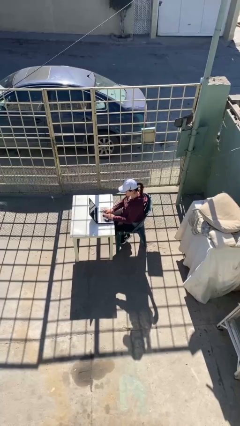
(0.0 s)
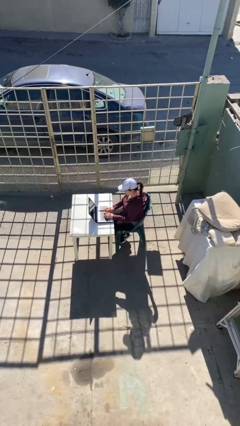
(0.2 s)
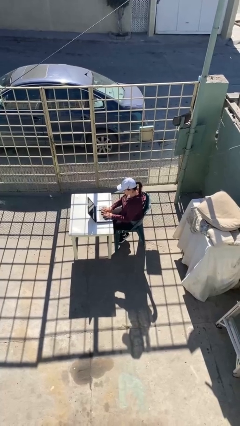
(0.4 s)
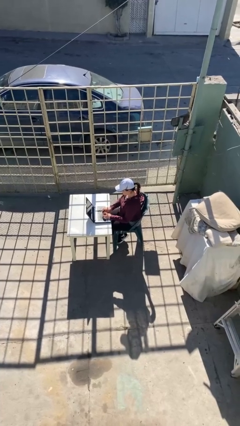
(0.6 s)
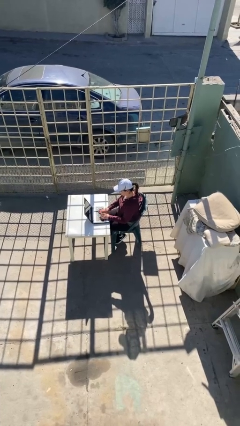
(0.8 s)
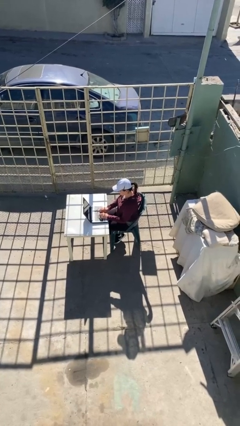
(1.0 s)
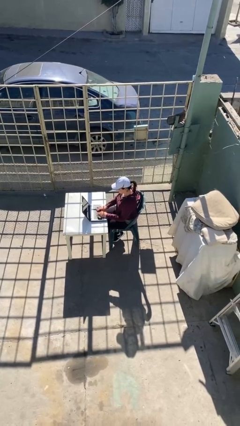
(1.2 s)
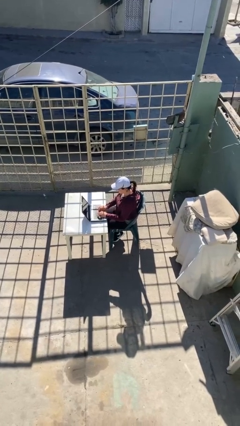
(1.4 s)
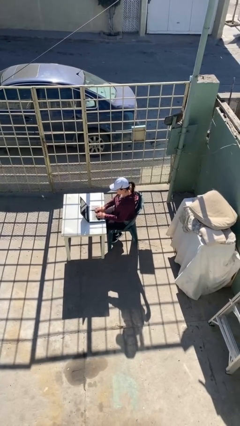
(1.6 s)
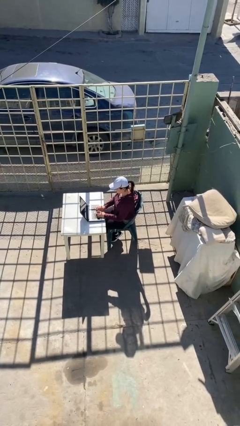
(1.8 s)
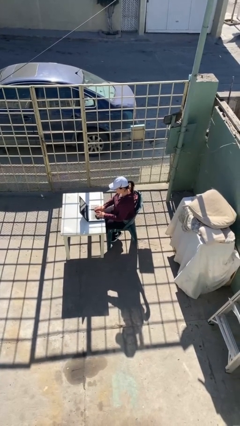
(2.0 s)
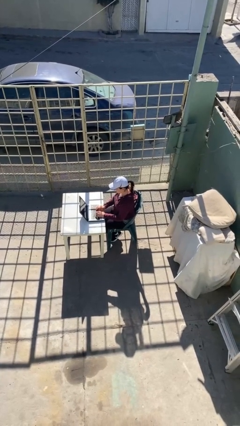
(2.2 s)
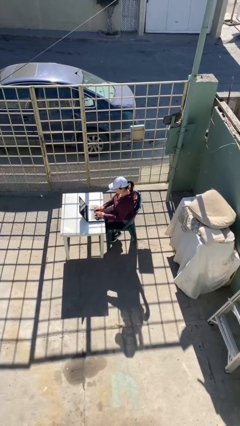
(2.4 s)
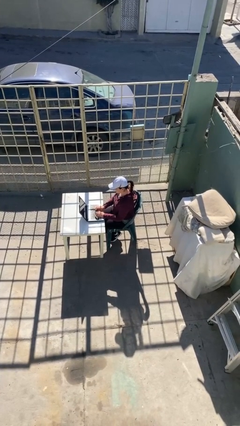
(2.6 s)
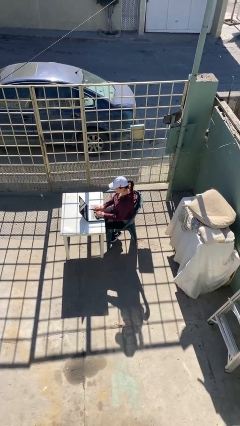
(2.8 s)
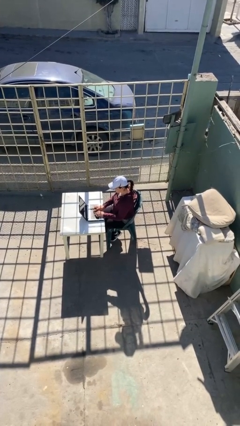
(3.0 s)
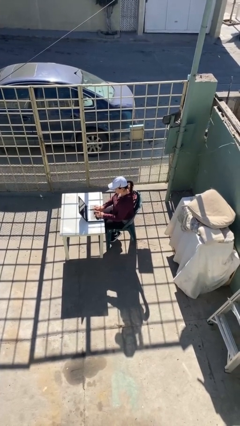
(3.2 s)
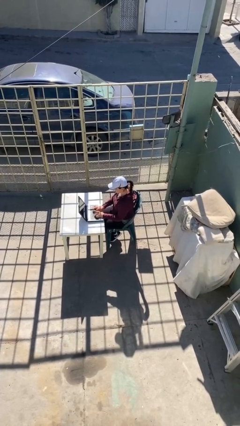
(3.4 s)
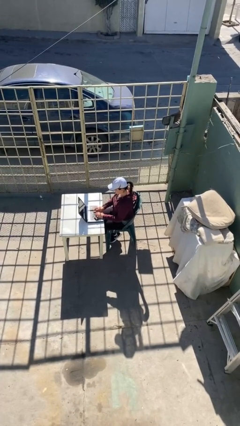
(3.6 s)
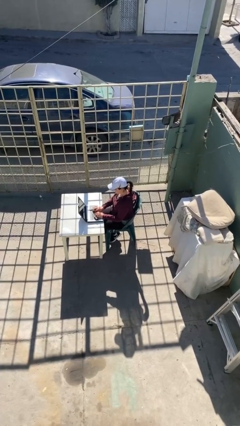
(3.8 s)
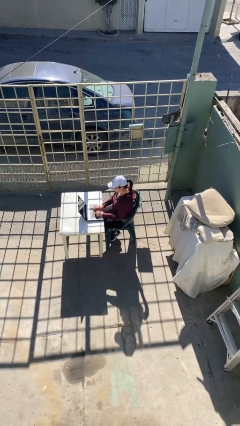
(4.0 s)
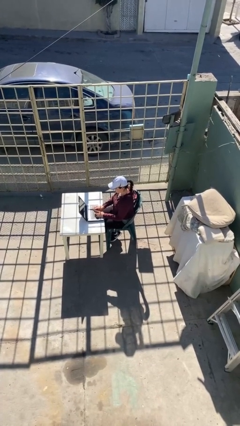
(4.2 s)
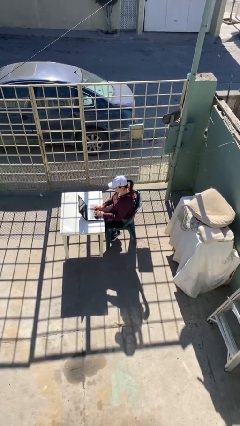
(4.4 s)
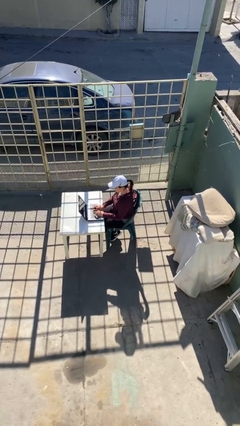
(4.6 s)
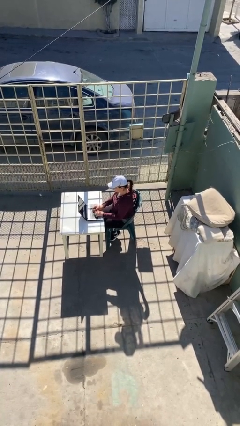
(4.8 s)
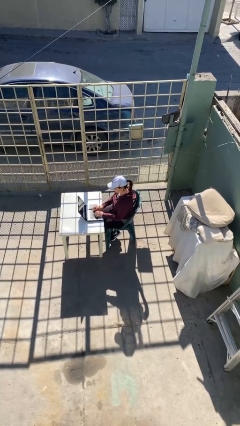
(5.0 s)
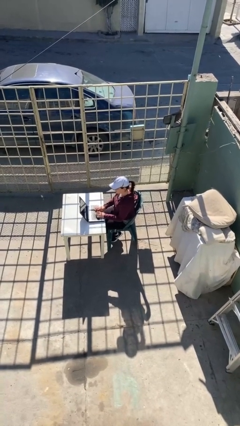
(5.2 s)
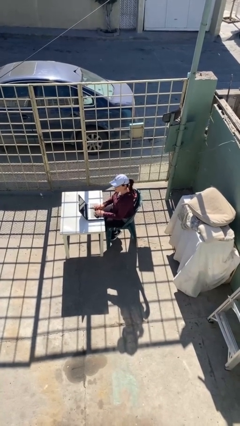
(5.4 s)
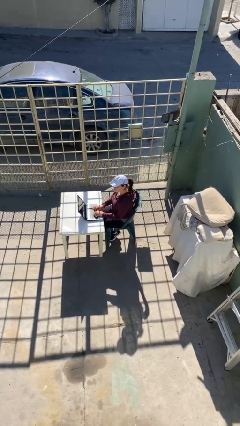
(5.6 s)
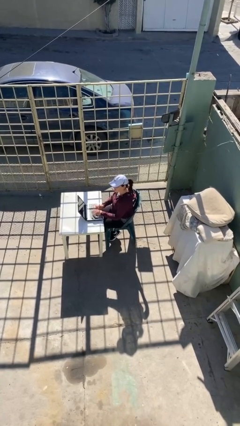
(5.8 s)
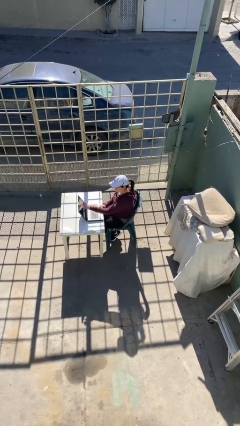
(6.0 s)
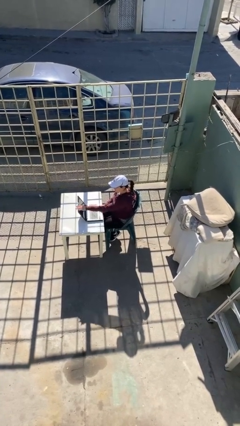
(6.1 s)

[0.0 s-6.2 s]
person interacts with laptop

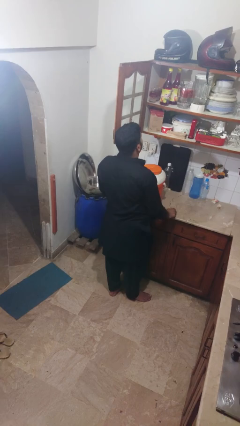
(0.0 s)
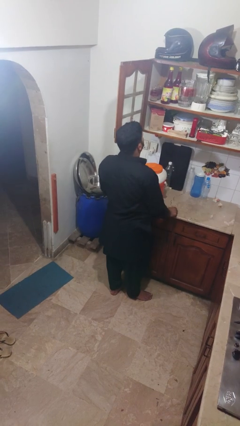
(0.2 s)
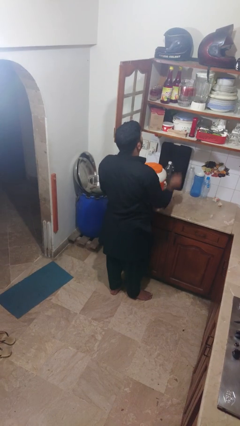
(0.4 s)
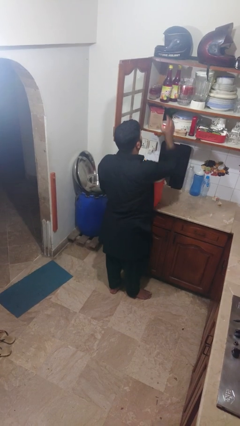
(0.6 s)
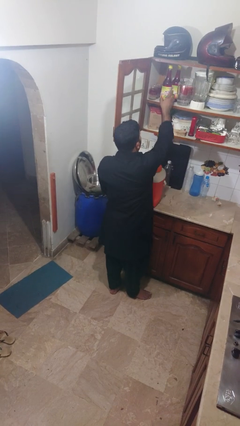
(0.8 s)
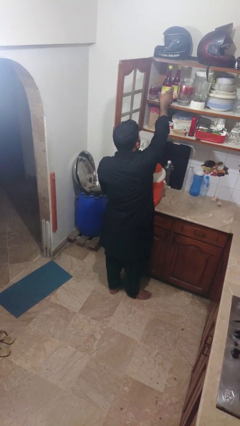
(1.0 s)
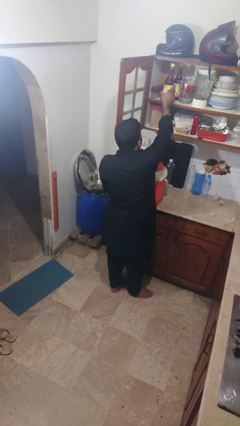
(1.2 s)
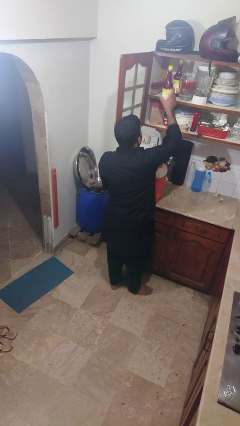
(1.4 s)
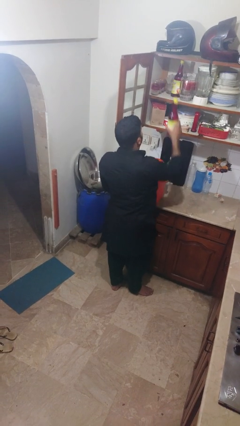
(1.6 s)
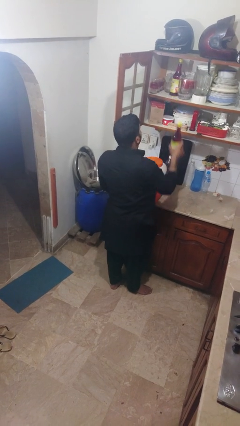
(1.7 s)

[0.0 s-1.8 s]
person picks up object from cabinet

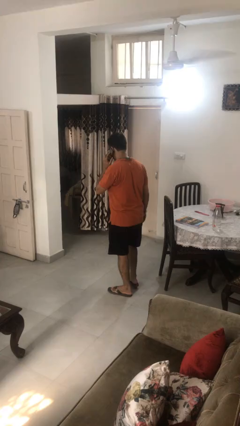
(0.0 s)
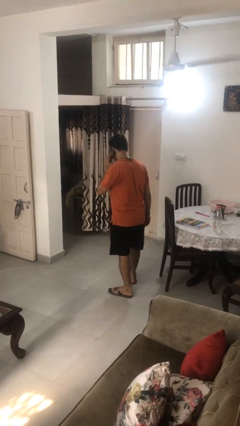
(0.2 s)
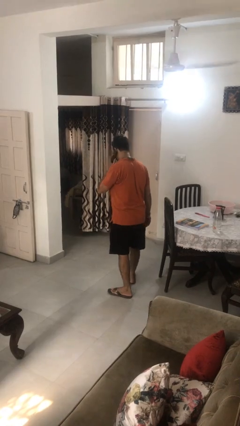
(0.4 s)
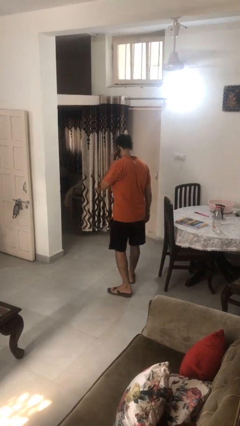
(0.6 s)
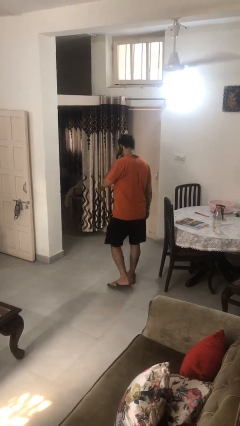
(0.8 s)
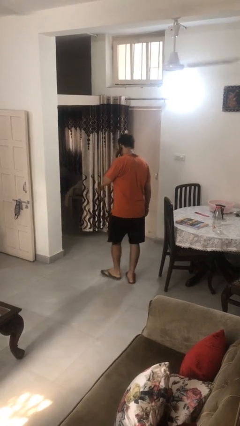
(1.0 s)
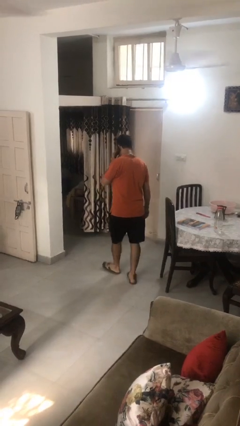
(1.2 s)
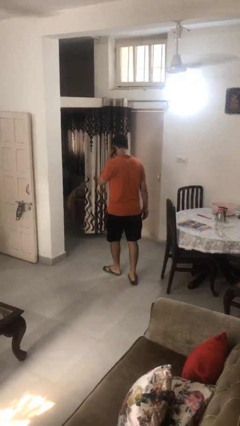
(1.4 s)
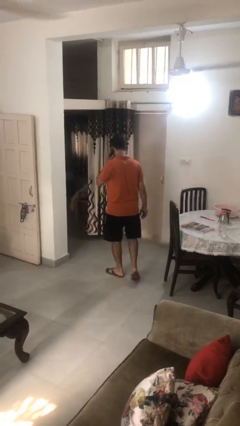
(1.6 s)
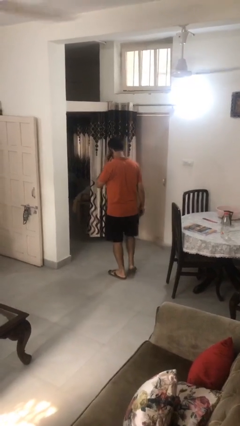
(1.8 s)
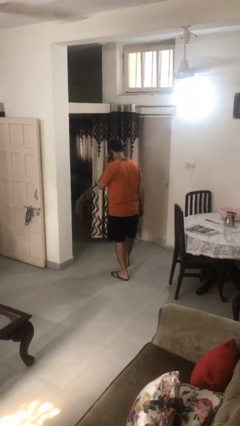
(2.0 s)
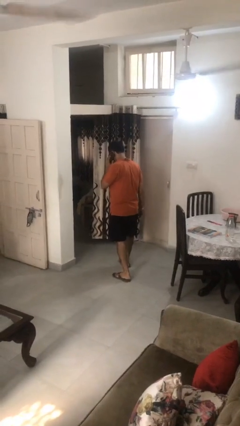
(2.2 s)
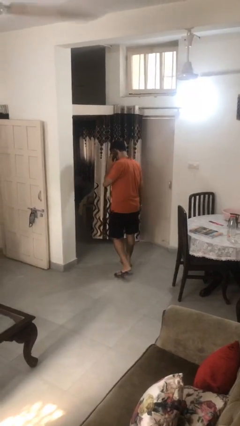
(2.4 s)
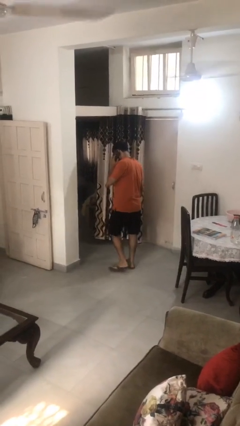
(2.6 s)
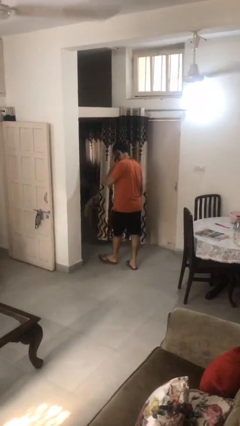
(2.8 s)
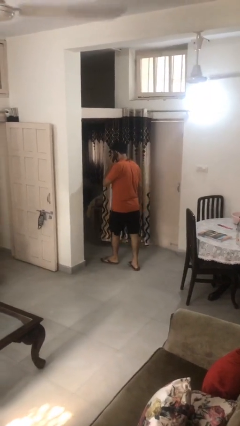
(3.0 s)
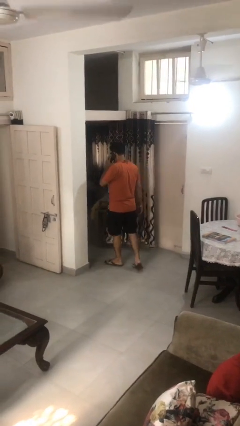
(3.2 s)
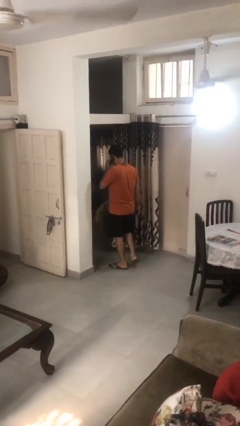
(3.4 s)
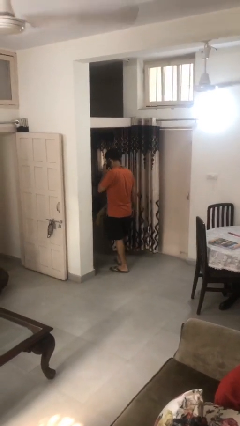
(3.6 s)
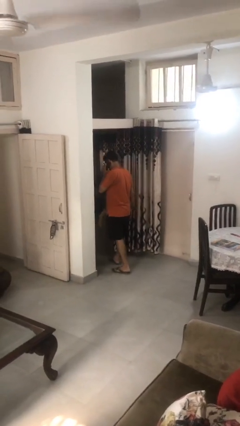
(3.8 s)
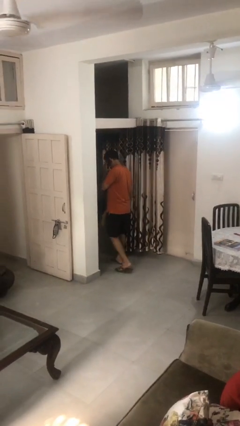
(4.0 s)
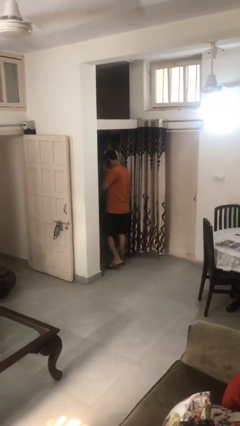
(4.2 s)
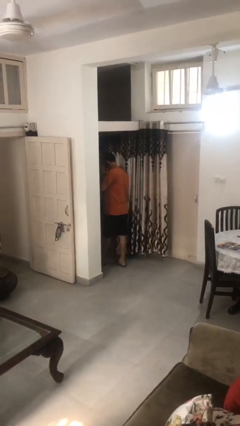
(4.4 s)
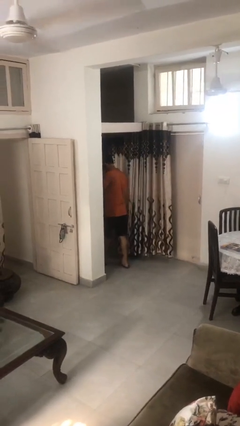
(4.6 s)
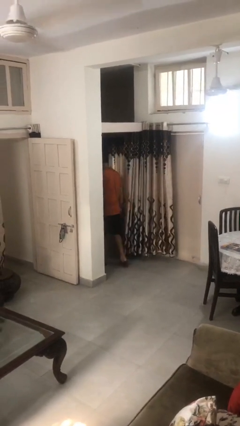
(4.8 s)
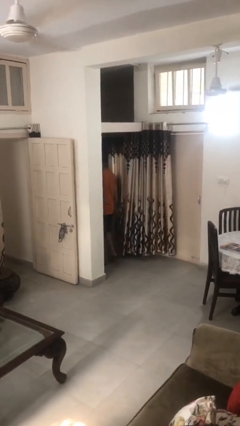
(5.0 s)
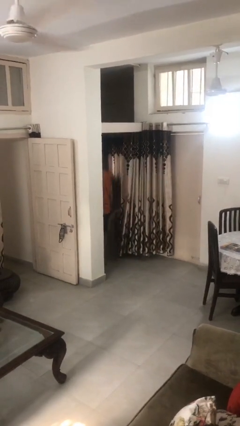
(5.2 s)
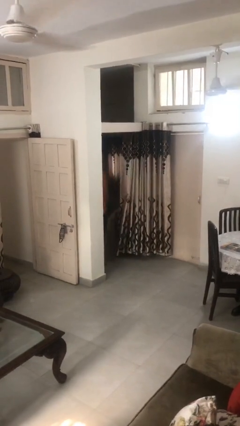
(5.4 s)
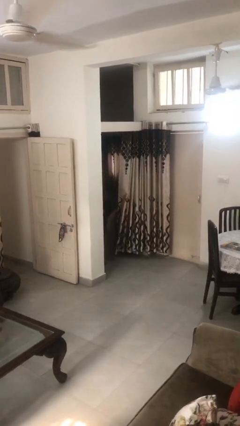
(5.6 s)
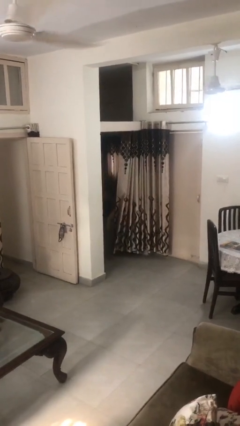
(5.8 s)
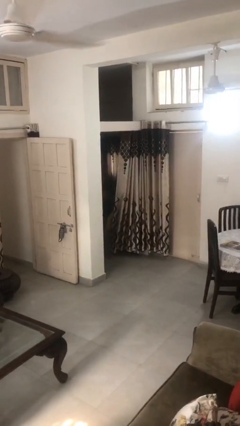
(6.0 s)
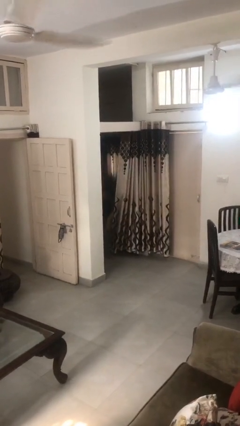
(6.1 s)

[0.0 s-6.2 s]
person exits scene through structure

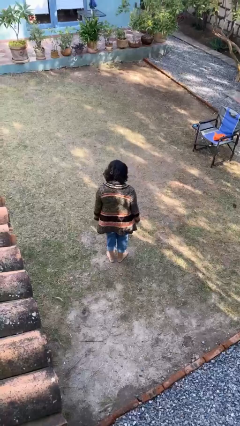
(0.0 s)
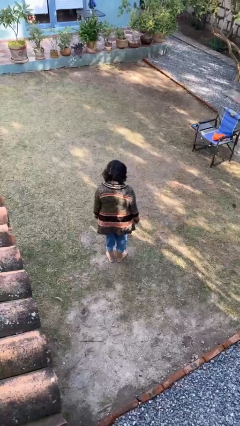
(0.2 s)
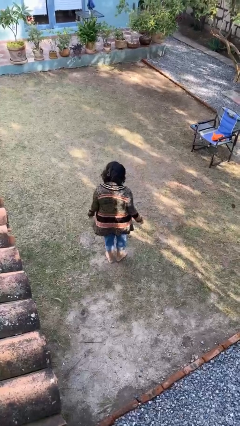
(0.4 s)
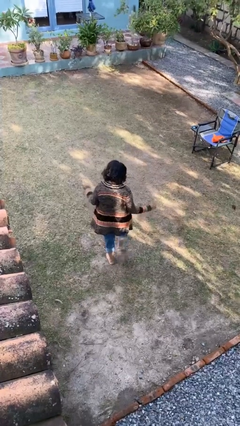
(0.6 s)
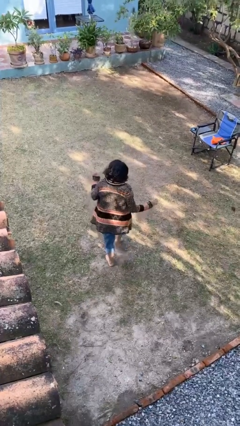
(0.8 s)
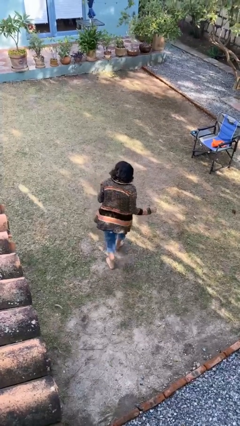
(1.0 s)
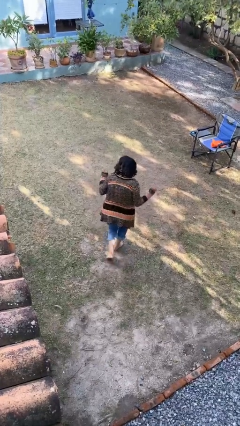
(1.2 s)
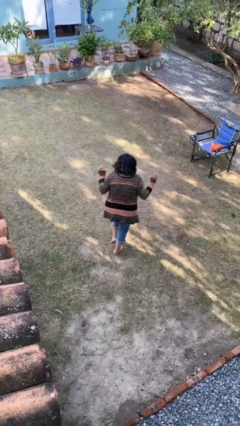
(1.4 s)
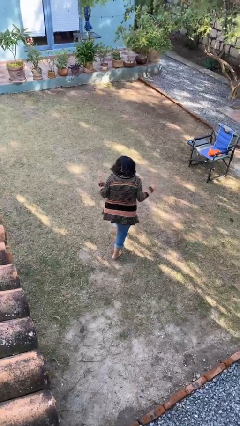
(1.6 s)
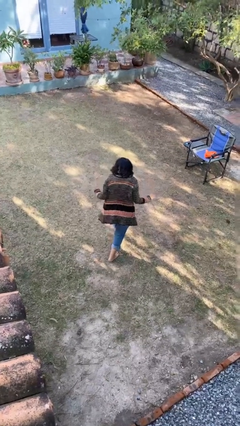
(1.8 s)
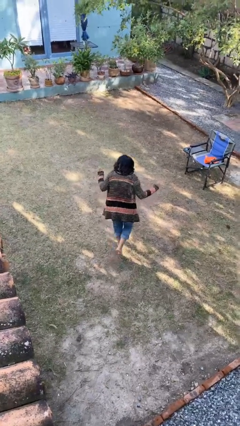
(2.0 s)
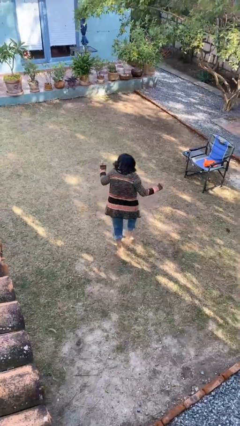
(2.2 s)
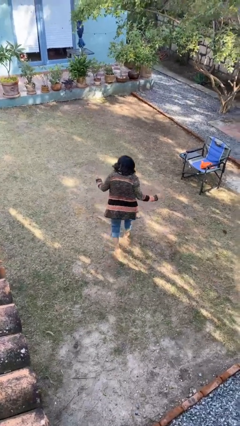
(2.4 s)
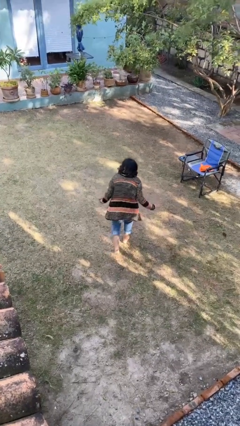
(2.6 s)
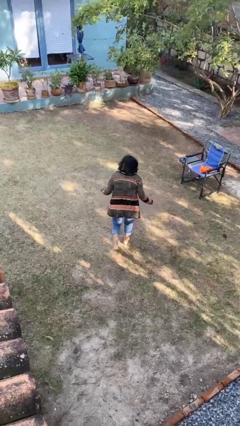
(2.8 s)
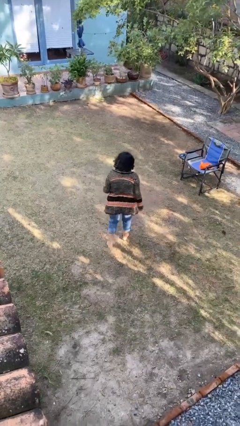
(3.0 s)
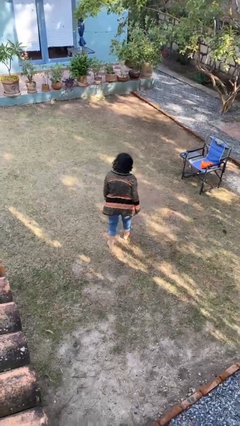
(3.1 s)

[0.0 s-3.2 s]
person walks tiptoe

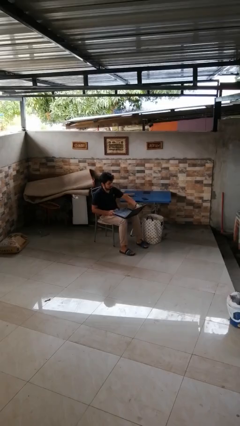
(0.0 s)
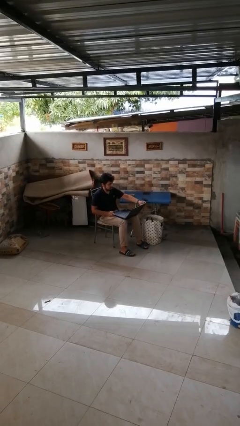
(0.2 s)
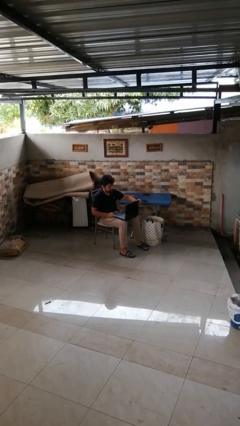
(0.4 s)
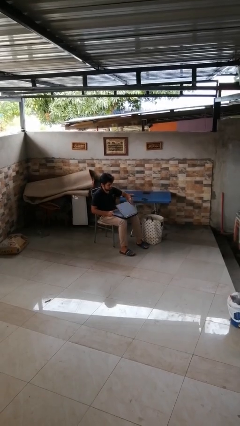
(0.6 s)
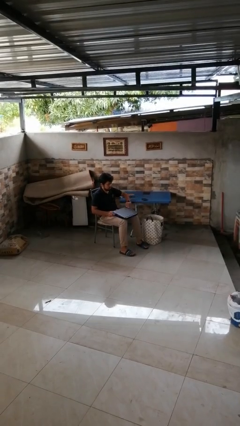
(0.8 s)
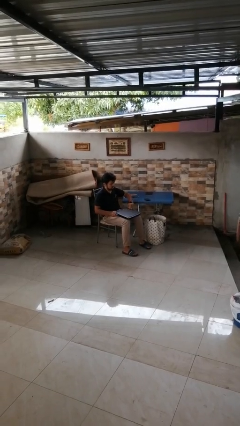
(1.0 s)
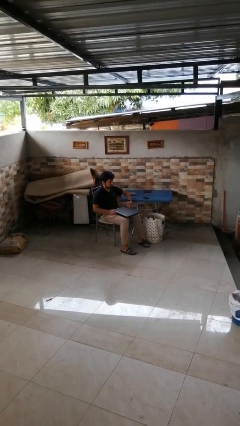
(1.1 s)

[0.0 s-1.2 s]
person closes laptop
